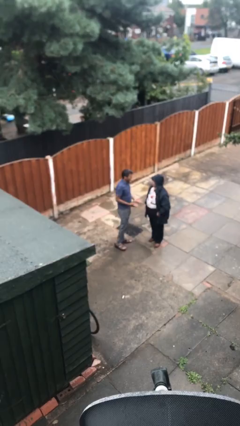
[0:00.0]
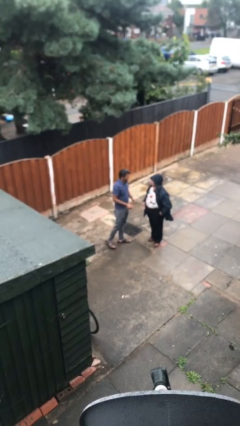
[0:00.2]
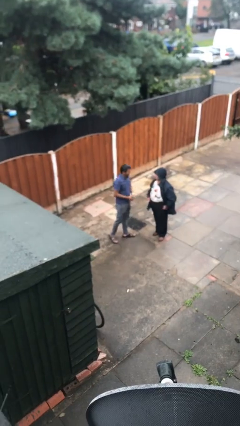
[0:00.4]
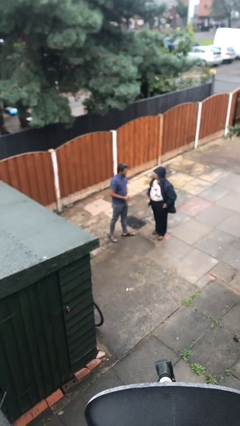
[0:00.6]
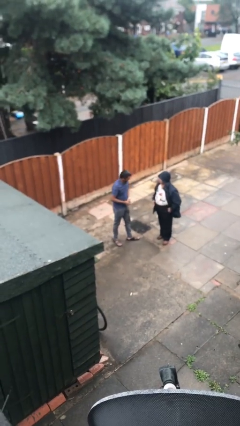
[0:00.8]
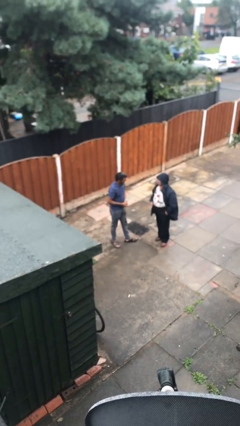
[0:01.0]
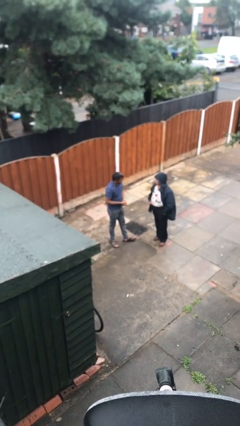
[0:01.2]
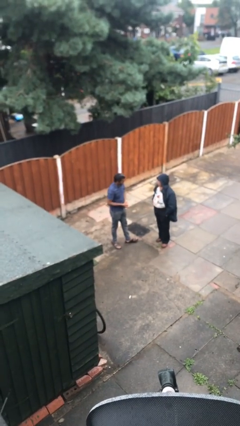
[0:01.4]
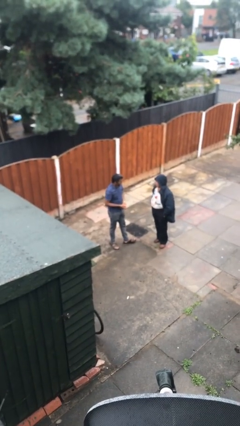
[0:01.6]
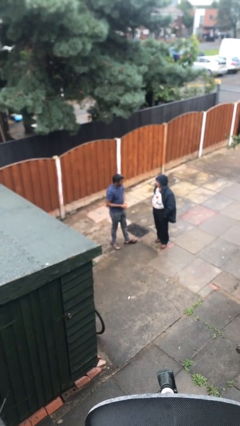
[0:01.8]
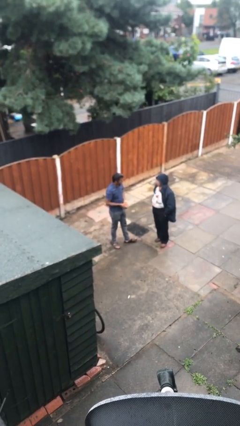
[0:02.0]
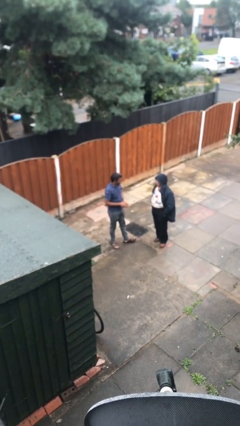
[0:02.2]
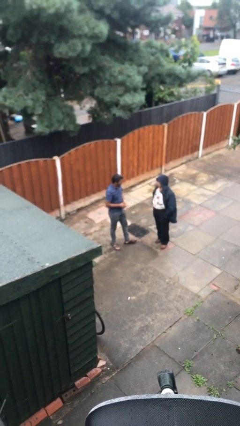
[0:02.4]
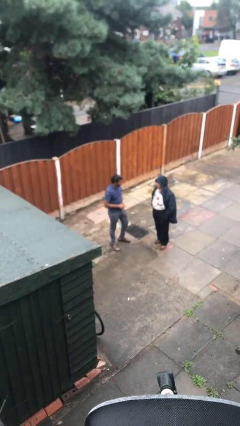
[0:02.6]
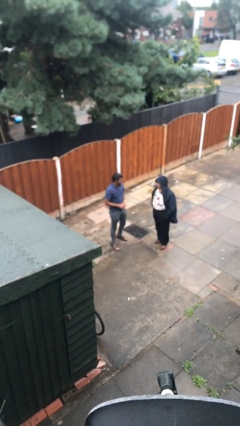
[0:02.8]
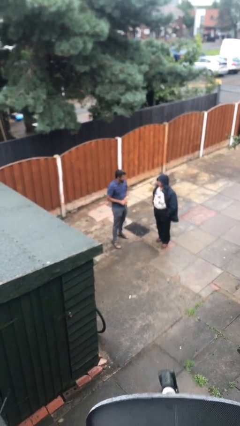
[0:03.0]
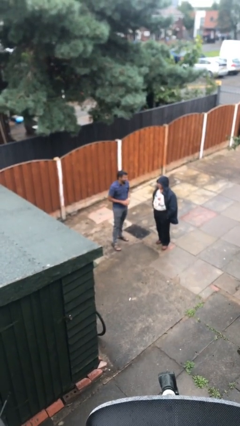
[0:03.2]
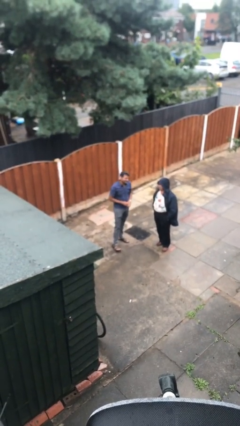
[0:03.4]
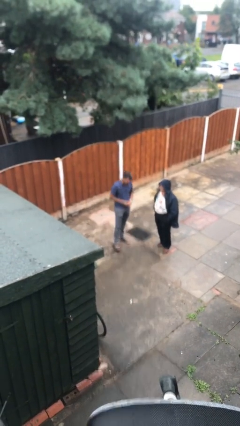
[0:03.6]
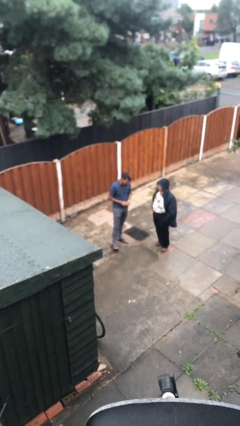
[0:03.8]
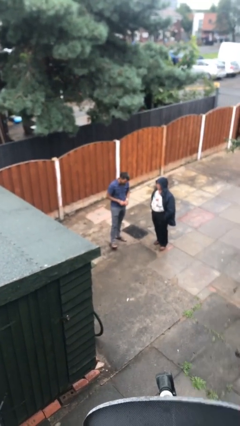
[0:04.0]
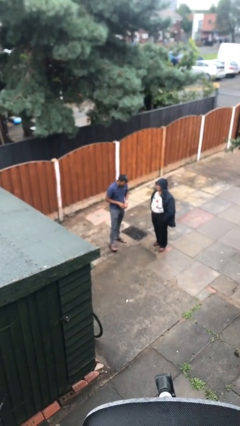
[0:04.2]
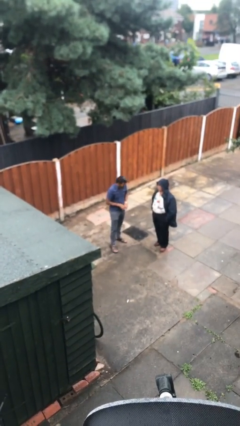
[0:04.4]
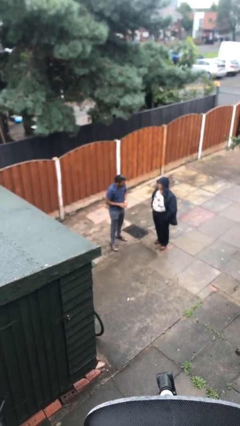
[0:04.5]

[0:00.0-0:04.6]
person talks to person

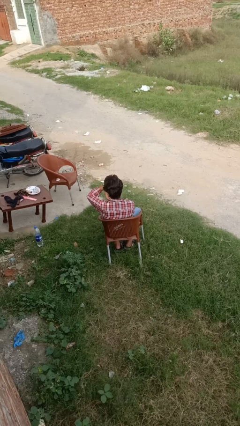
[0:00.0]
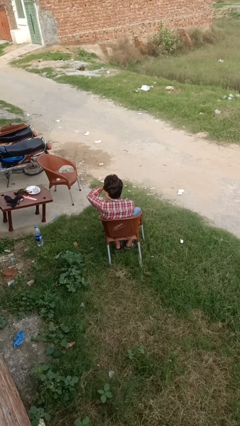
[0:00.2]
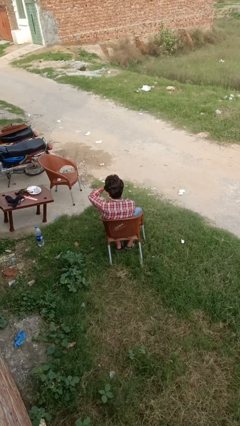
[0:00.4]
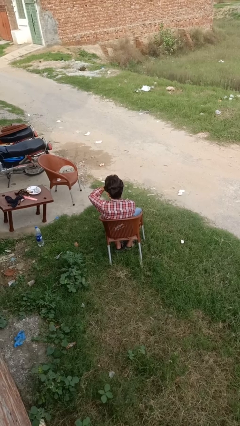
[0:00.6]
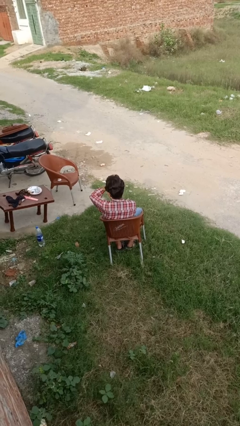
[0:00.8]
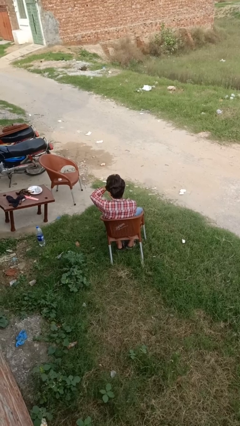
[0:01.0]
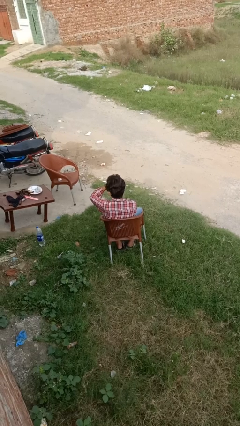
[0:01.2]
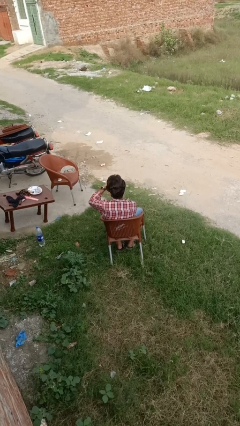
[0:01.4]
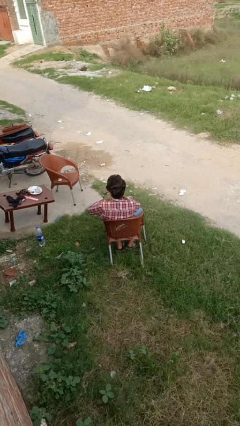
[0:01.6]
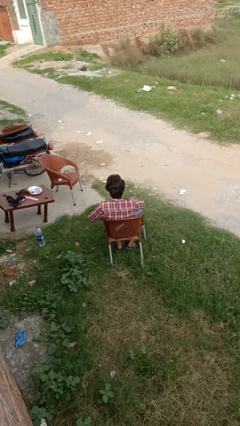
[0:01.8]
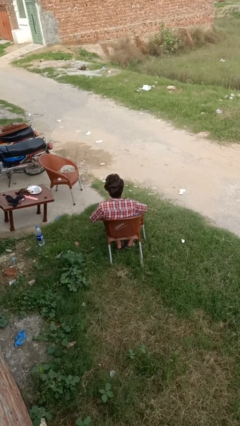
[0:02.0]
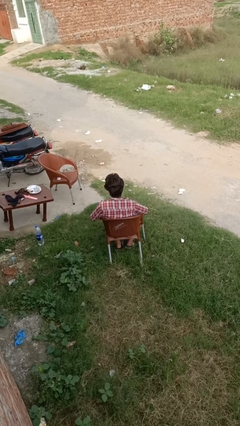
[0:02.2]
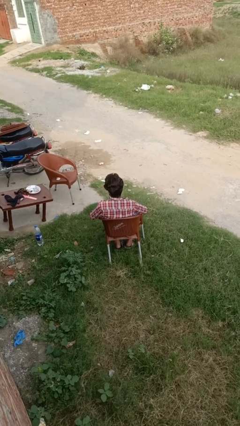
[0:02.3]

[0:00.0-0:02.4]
person takes off wristwatch

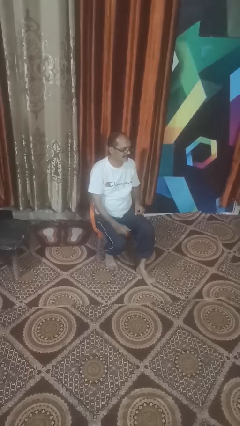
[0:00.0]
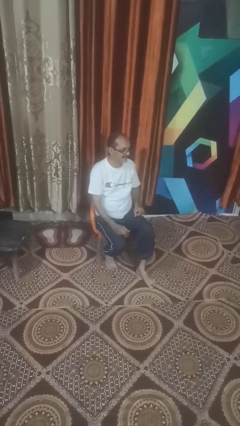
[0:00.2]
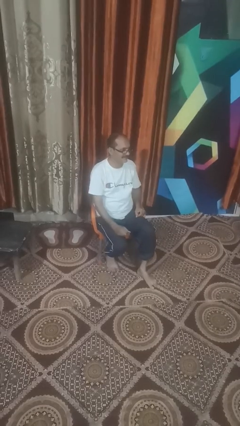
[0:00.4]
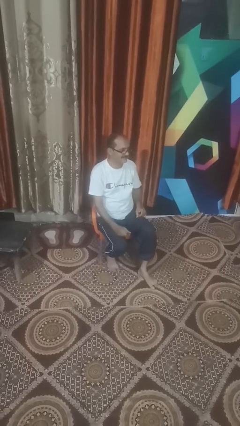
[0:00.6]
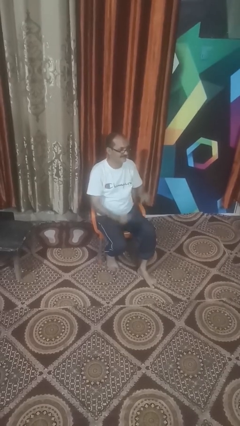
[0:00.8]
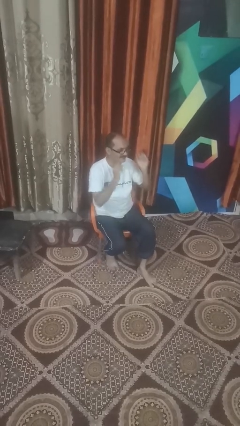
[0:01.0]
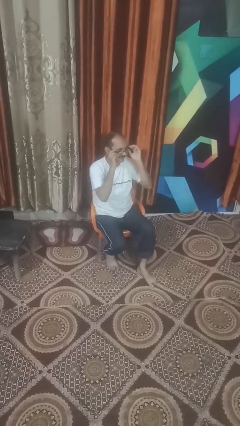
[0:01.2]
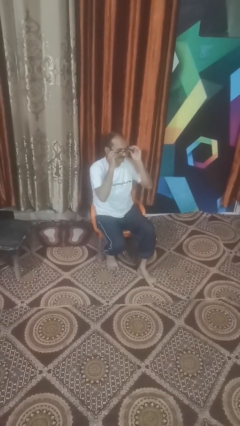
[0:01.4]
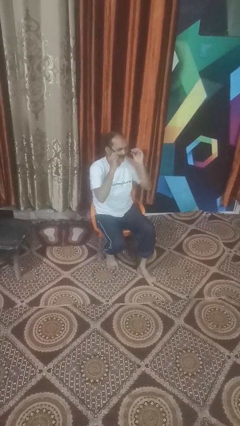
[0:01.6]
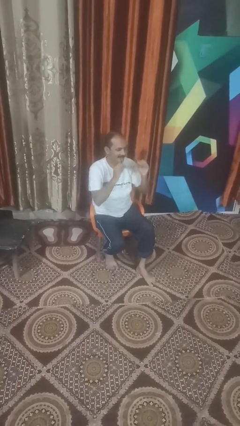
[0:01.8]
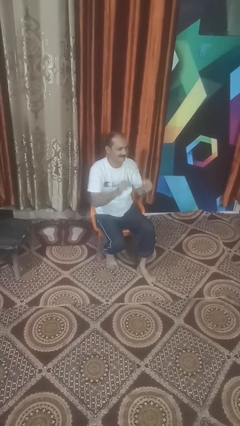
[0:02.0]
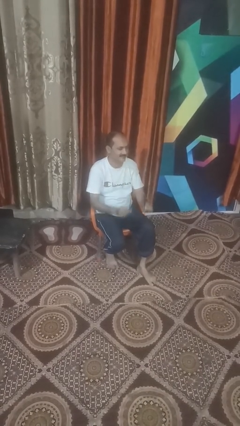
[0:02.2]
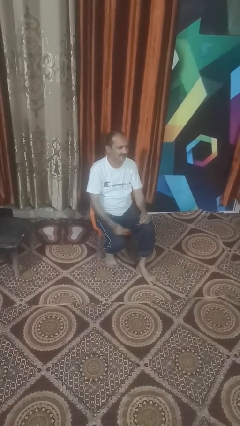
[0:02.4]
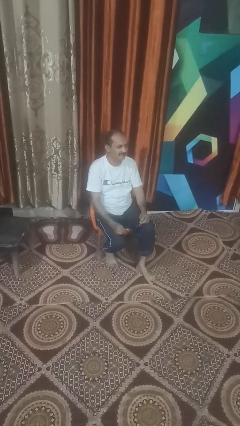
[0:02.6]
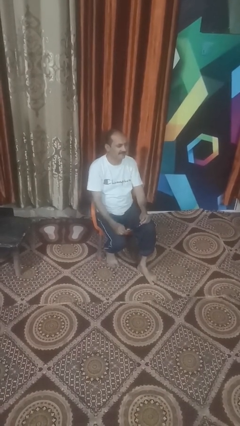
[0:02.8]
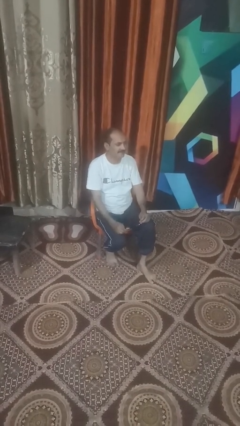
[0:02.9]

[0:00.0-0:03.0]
person takes off glasses

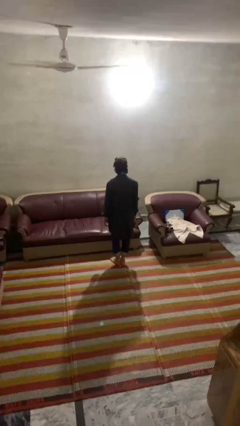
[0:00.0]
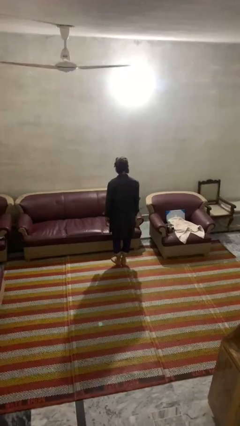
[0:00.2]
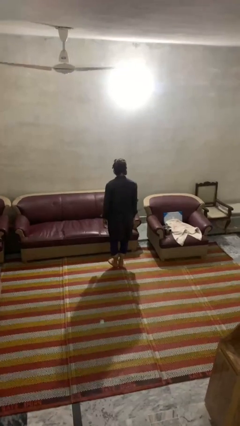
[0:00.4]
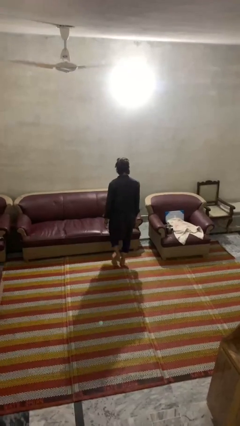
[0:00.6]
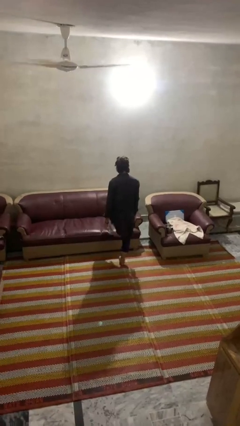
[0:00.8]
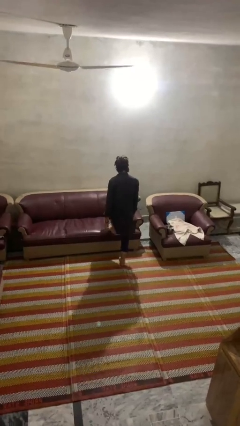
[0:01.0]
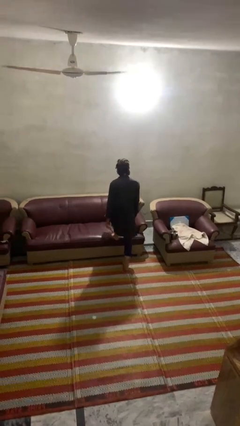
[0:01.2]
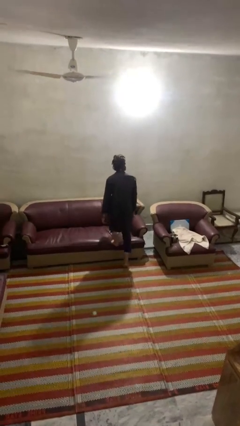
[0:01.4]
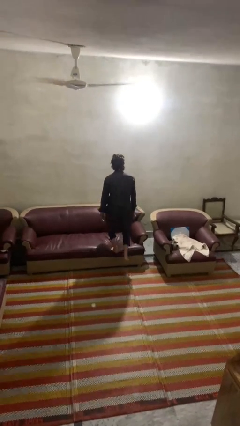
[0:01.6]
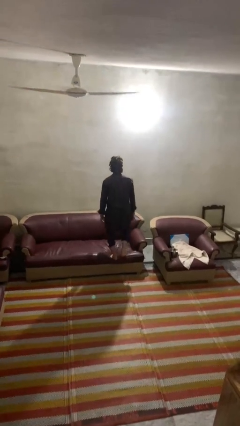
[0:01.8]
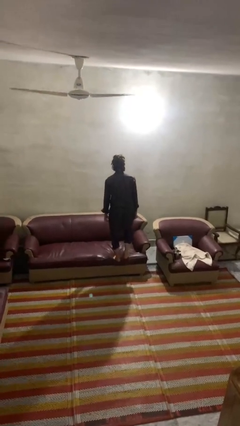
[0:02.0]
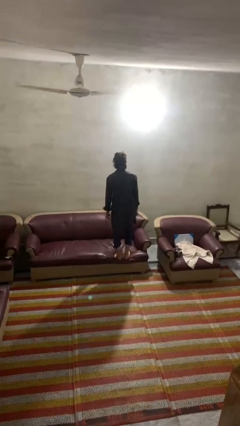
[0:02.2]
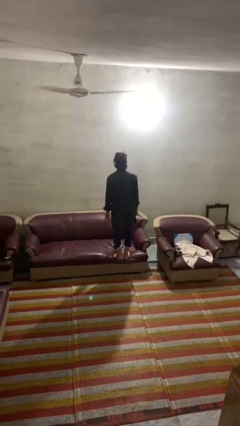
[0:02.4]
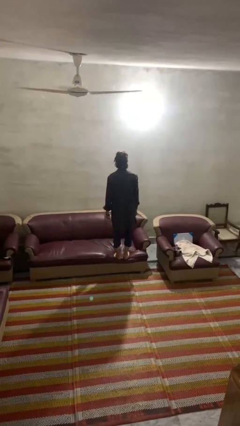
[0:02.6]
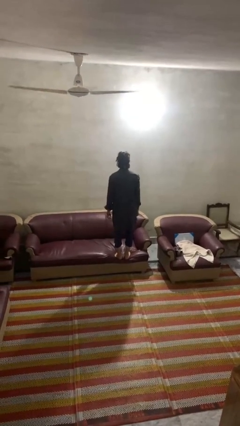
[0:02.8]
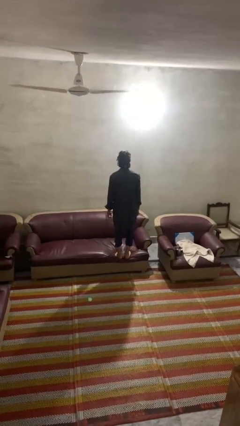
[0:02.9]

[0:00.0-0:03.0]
person climbs on couch

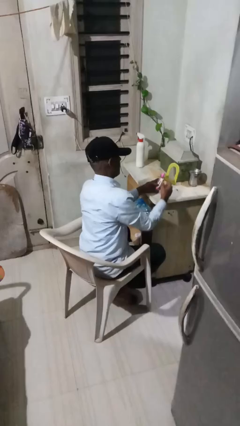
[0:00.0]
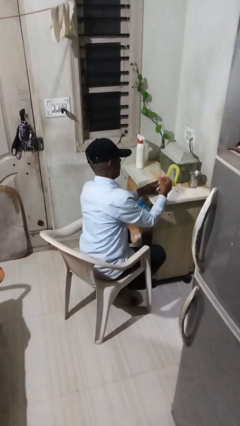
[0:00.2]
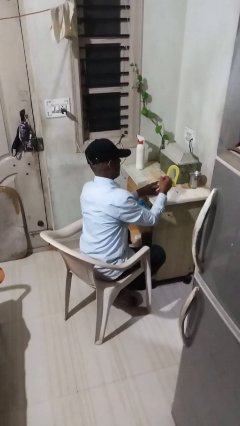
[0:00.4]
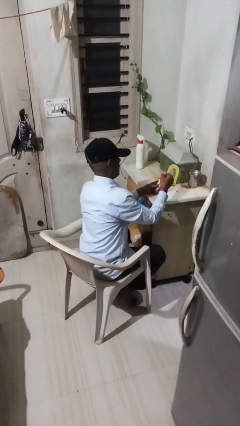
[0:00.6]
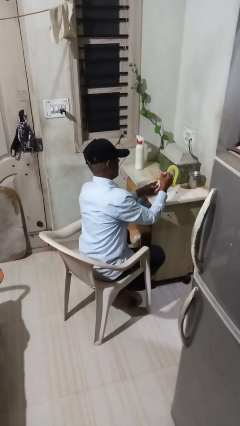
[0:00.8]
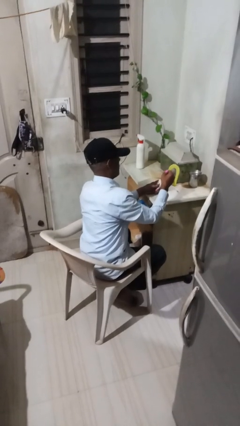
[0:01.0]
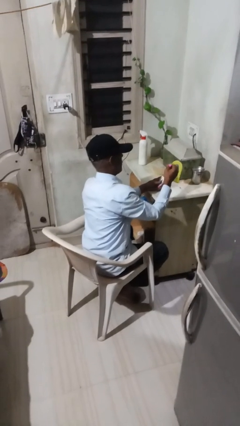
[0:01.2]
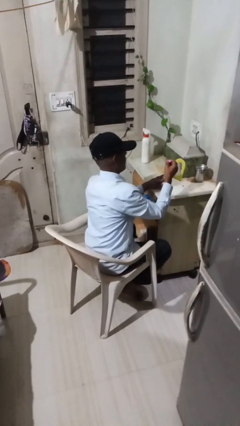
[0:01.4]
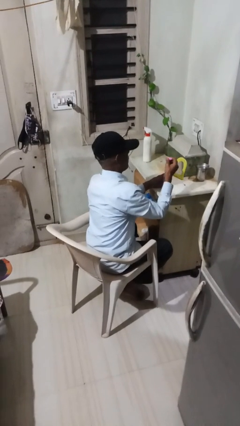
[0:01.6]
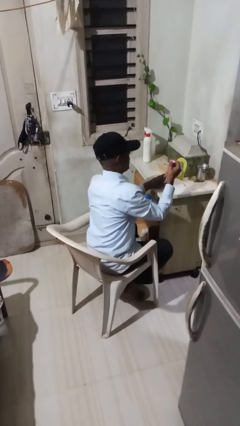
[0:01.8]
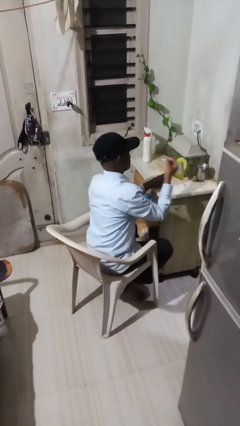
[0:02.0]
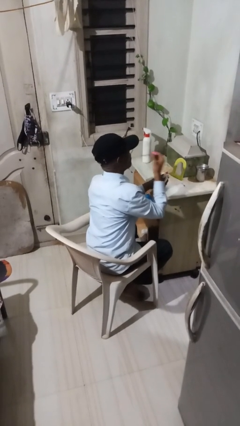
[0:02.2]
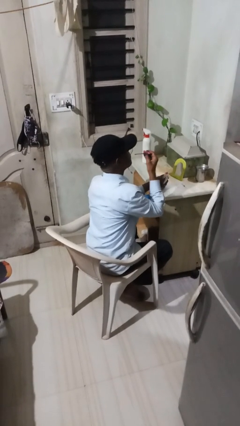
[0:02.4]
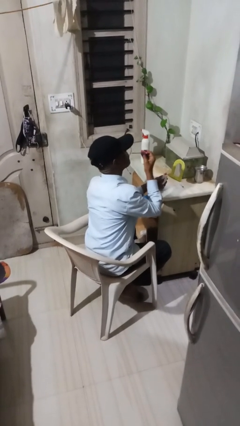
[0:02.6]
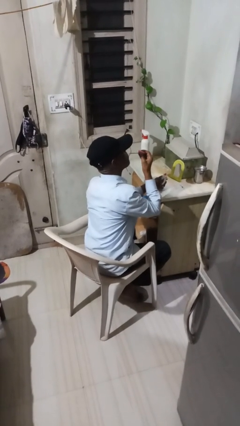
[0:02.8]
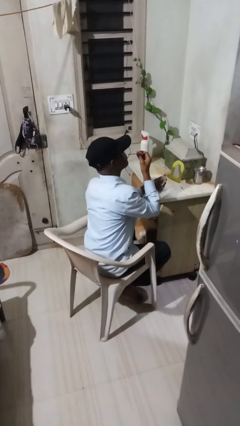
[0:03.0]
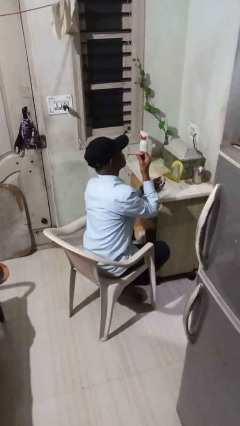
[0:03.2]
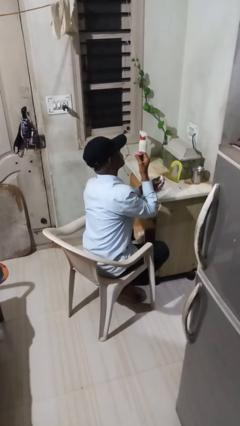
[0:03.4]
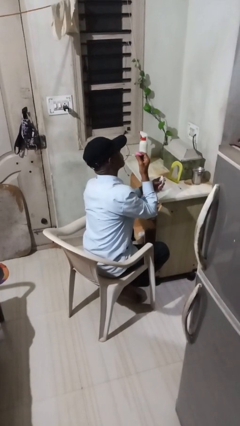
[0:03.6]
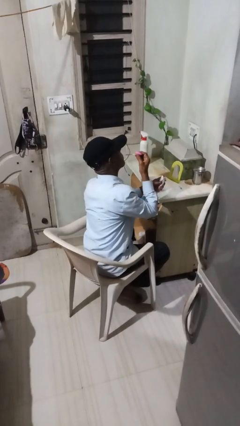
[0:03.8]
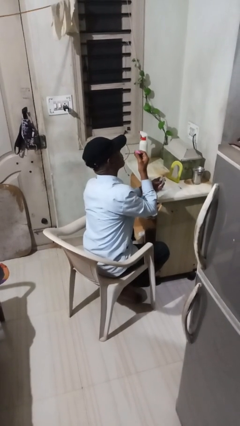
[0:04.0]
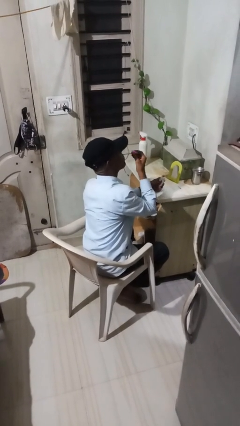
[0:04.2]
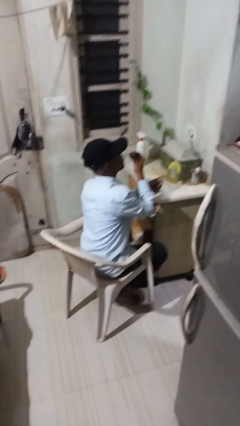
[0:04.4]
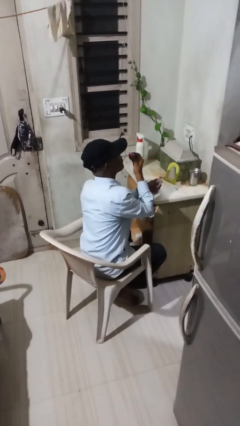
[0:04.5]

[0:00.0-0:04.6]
person applies lip makeup
